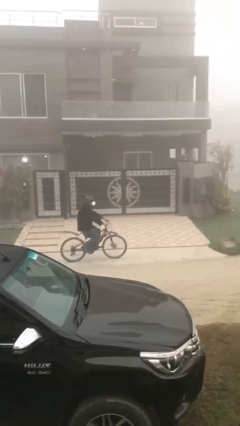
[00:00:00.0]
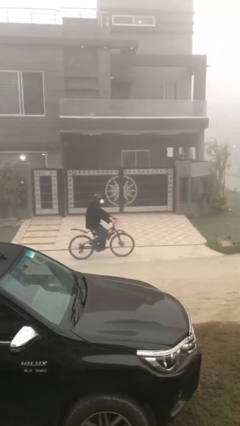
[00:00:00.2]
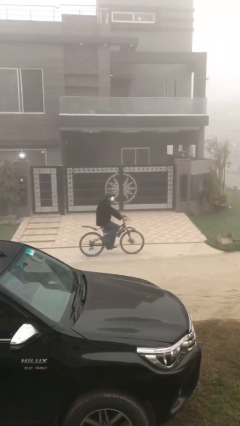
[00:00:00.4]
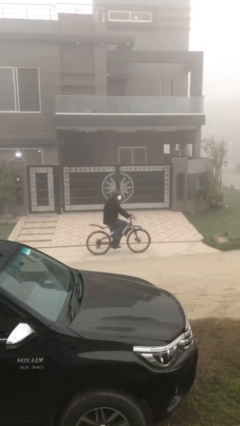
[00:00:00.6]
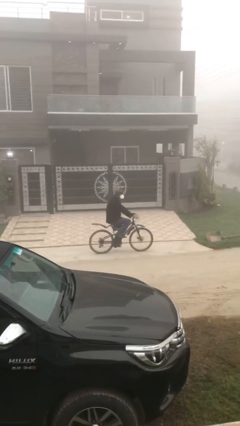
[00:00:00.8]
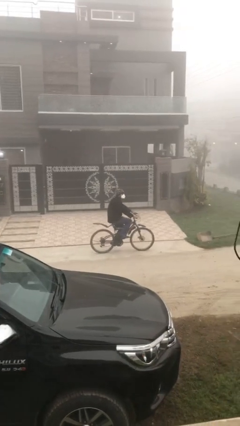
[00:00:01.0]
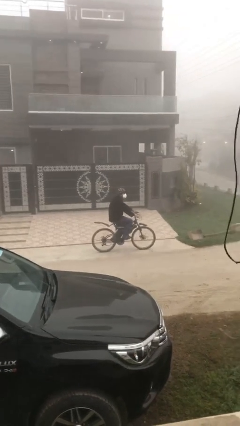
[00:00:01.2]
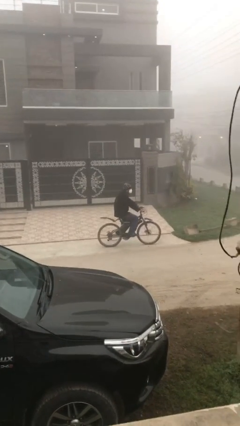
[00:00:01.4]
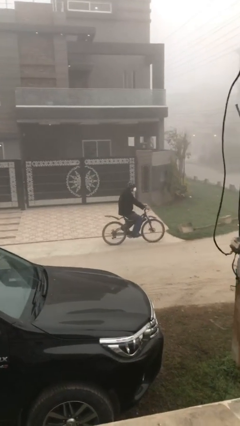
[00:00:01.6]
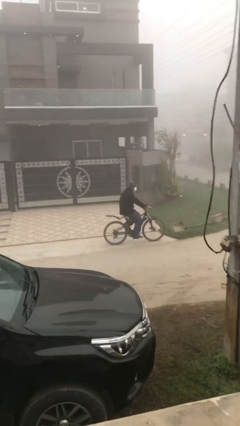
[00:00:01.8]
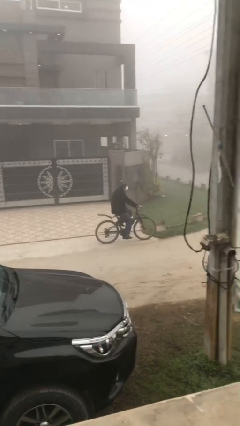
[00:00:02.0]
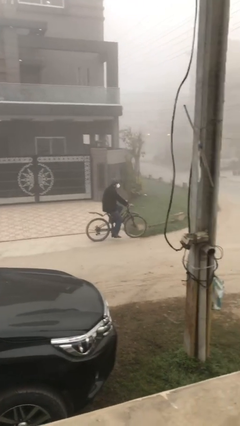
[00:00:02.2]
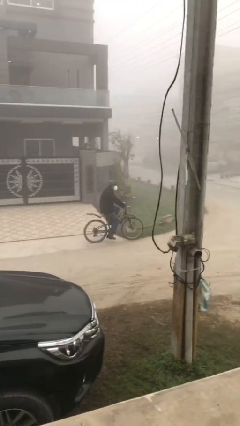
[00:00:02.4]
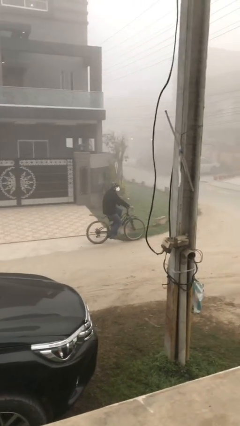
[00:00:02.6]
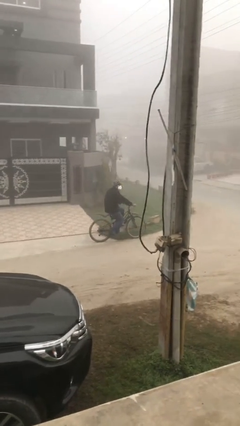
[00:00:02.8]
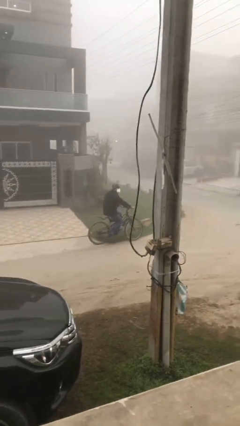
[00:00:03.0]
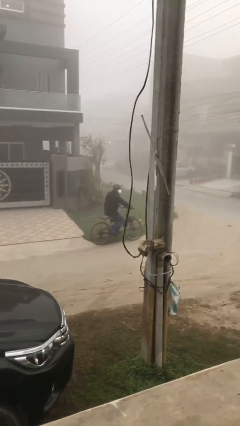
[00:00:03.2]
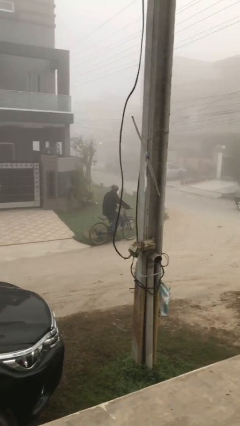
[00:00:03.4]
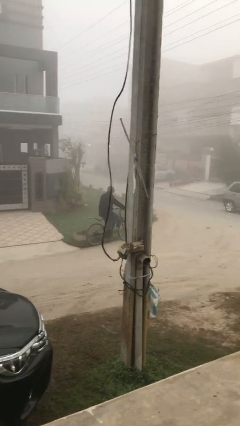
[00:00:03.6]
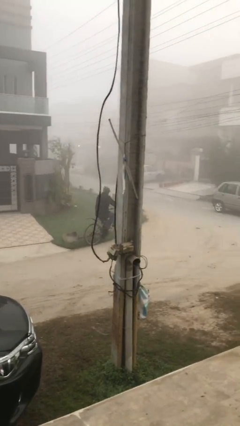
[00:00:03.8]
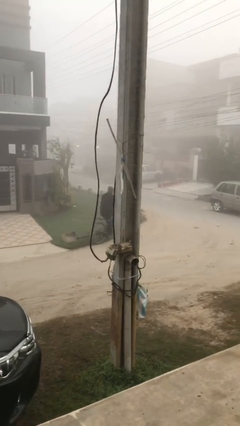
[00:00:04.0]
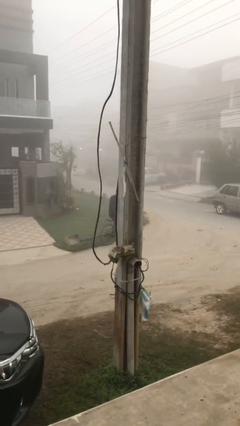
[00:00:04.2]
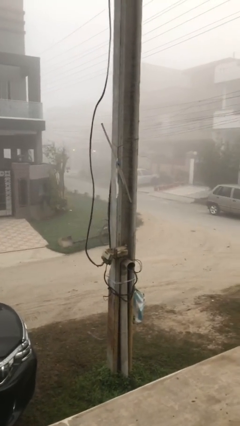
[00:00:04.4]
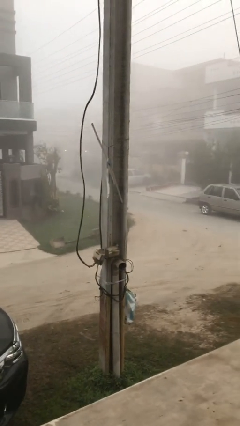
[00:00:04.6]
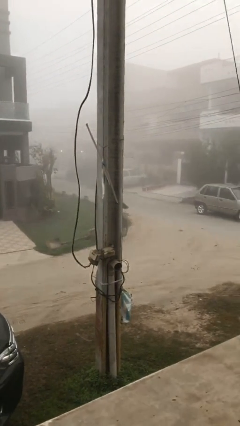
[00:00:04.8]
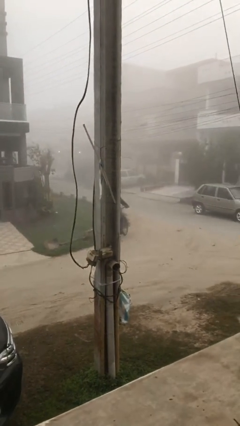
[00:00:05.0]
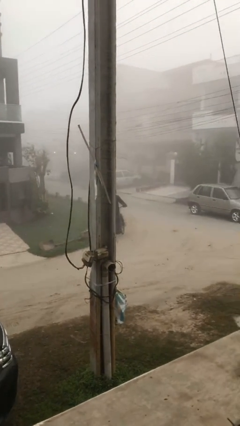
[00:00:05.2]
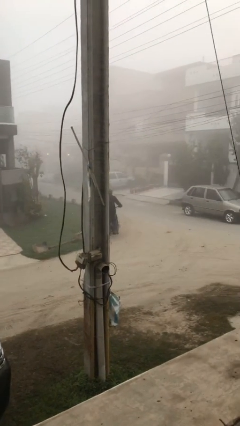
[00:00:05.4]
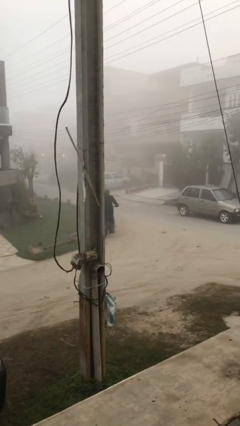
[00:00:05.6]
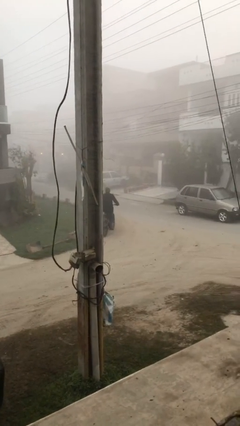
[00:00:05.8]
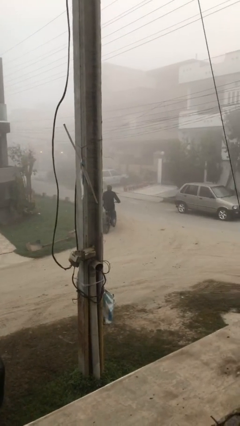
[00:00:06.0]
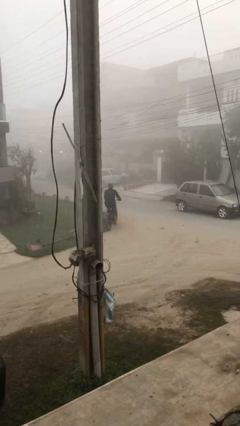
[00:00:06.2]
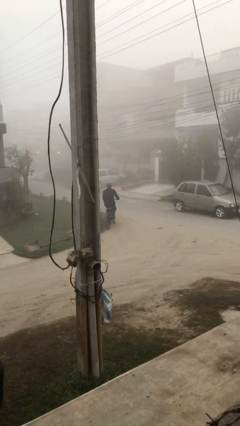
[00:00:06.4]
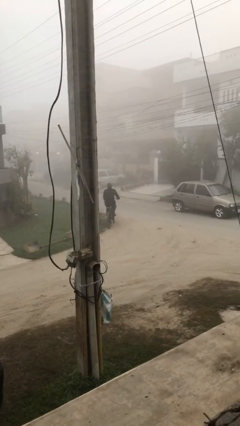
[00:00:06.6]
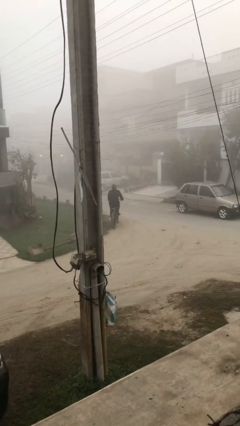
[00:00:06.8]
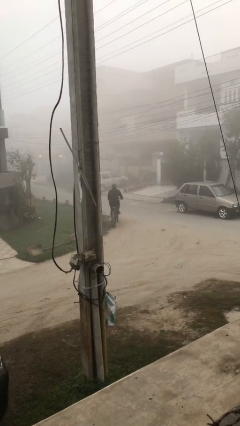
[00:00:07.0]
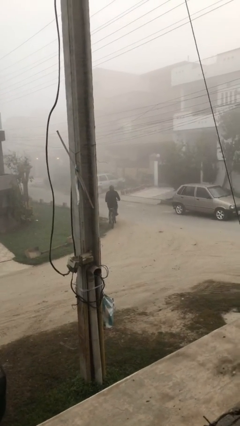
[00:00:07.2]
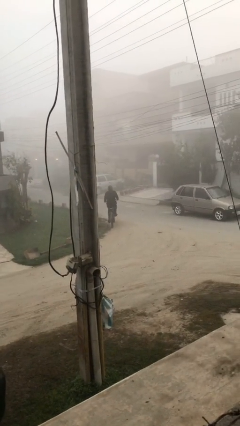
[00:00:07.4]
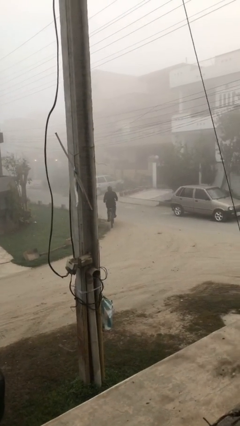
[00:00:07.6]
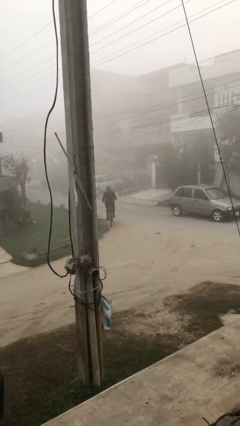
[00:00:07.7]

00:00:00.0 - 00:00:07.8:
person rides bicycle

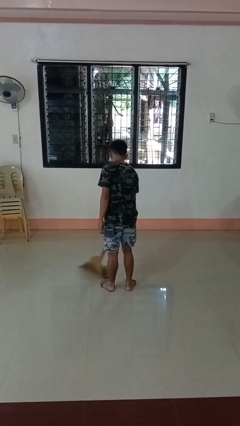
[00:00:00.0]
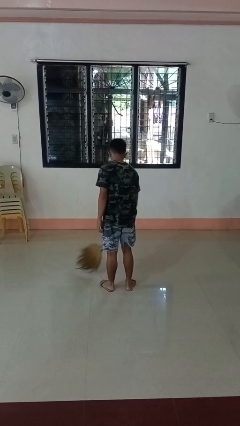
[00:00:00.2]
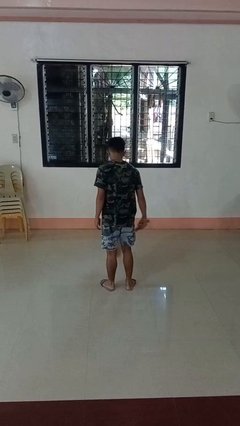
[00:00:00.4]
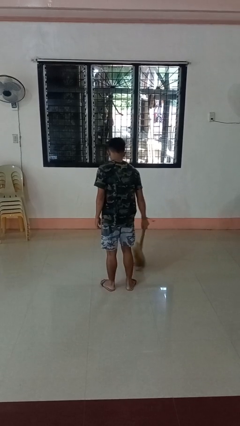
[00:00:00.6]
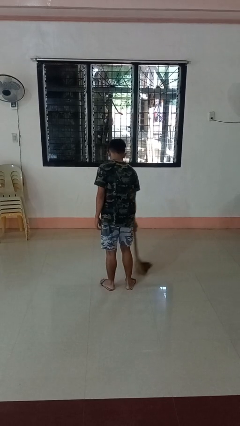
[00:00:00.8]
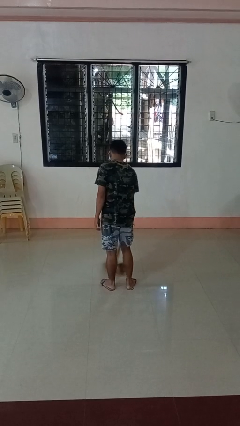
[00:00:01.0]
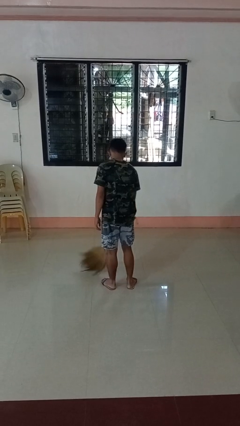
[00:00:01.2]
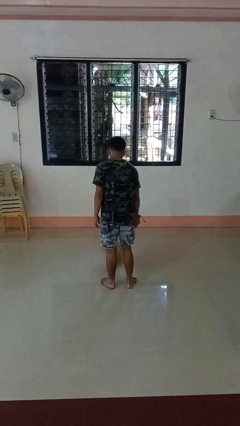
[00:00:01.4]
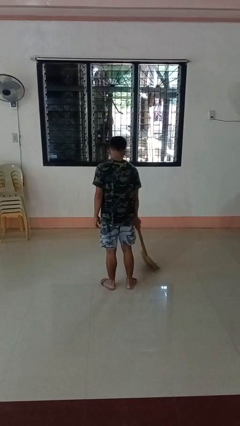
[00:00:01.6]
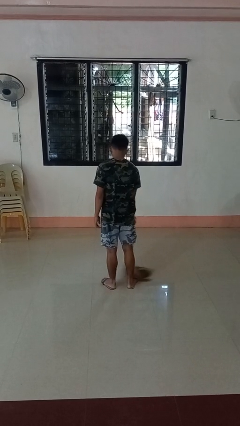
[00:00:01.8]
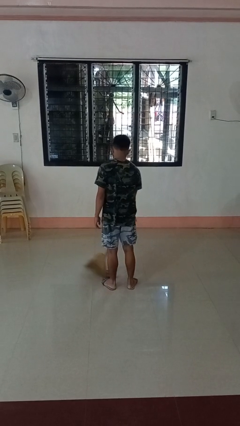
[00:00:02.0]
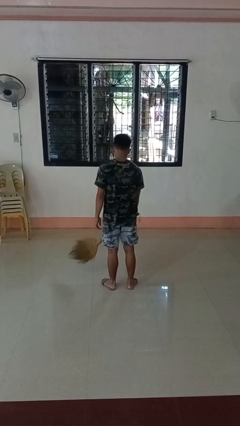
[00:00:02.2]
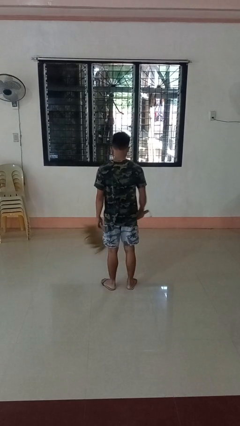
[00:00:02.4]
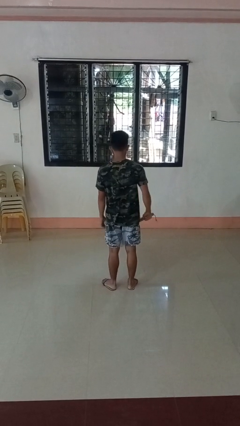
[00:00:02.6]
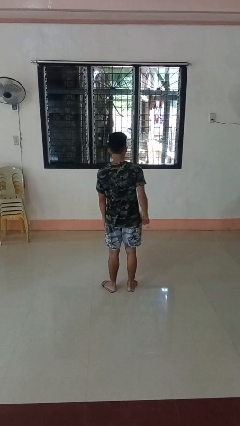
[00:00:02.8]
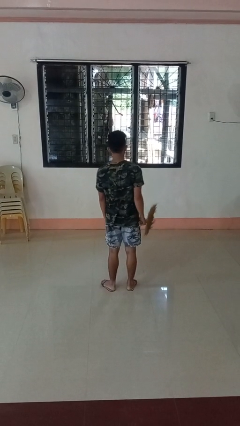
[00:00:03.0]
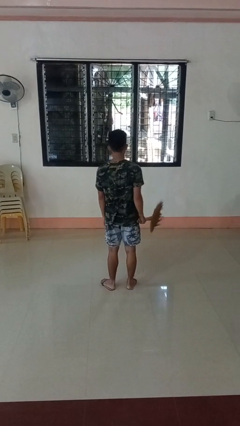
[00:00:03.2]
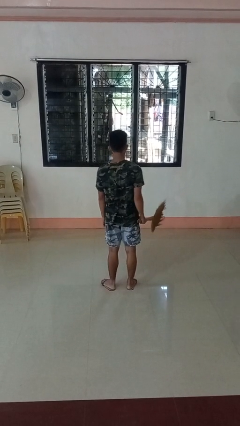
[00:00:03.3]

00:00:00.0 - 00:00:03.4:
person sweeps floor

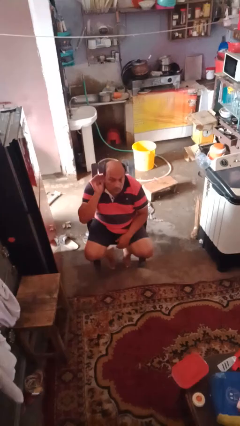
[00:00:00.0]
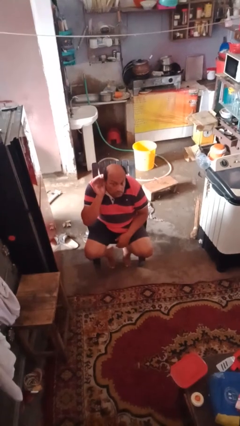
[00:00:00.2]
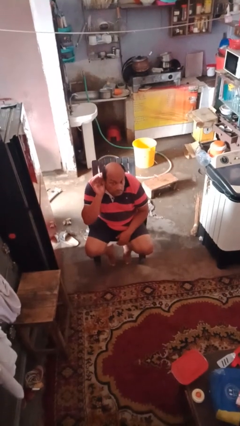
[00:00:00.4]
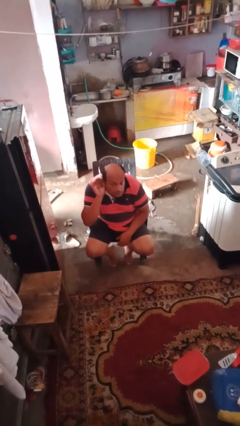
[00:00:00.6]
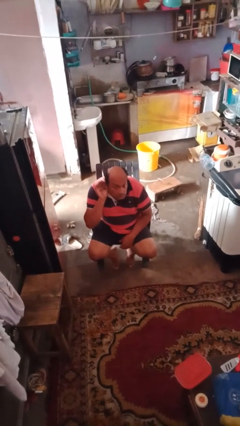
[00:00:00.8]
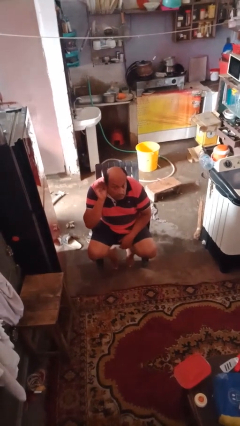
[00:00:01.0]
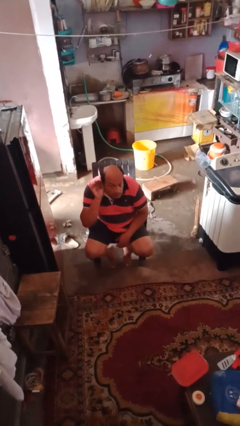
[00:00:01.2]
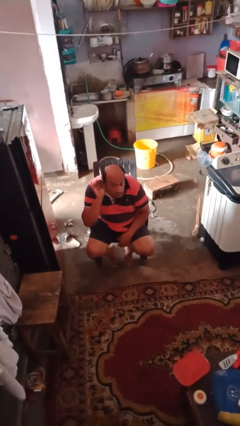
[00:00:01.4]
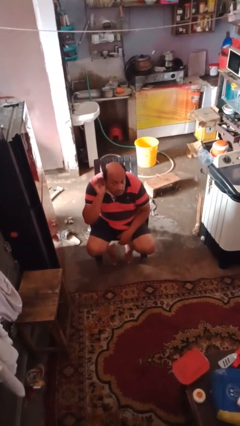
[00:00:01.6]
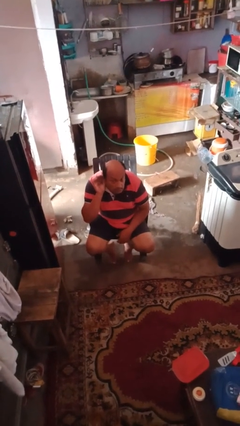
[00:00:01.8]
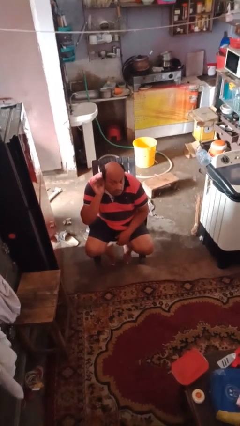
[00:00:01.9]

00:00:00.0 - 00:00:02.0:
person gestures listen closely

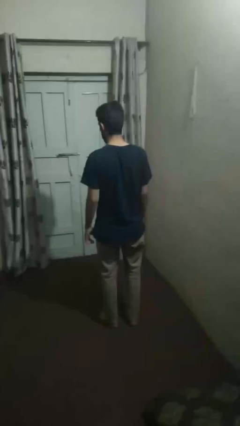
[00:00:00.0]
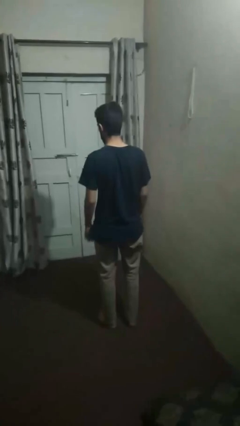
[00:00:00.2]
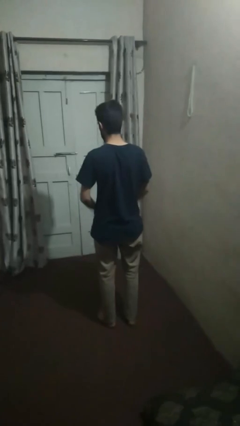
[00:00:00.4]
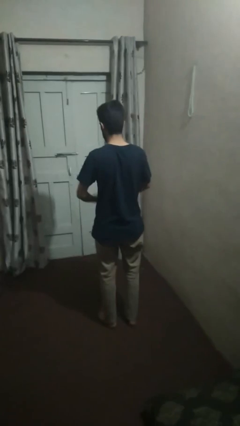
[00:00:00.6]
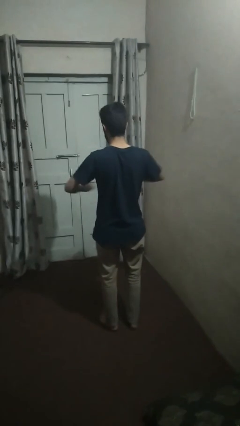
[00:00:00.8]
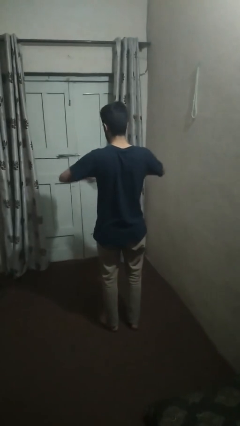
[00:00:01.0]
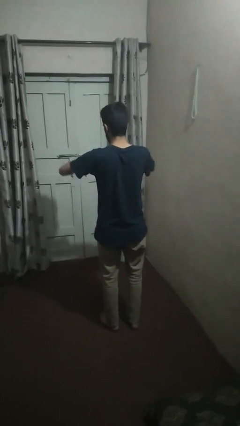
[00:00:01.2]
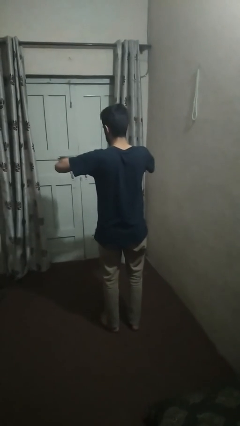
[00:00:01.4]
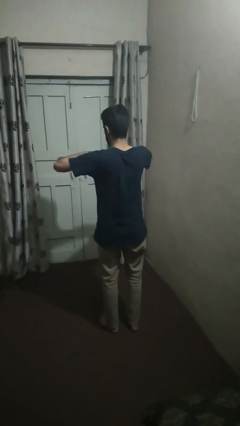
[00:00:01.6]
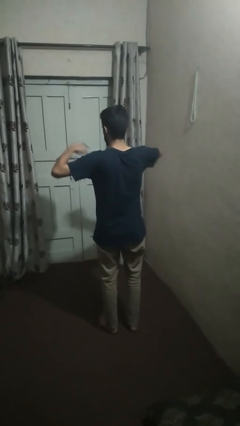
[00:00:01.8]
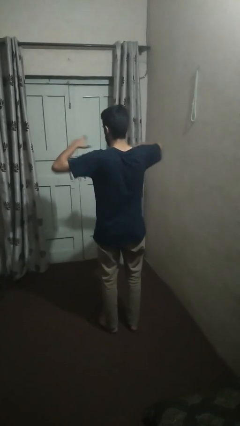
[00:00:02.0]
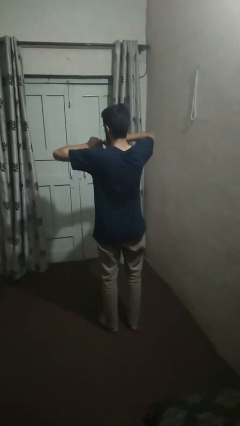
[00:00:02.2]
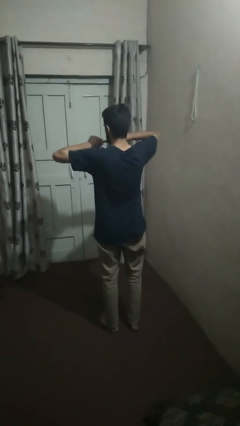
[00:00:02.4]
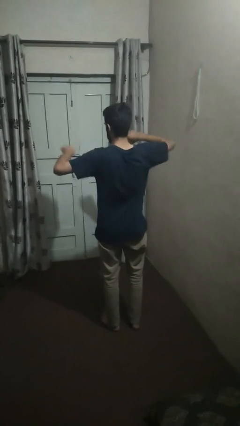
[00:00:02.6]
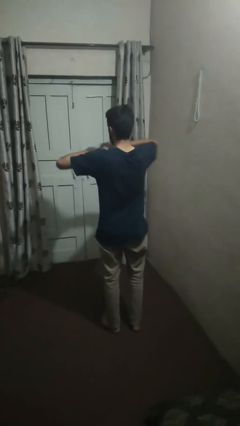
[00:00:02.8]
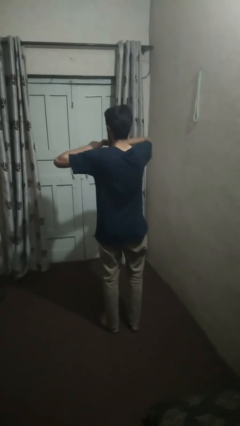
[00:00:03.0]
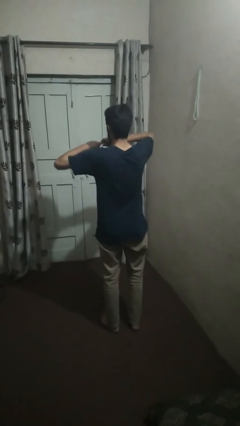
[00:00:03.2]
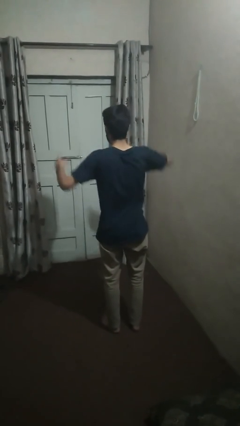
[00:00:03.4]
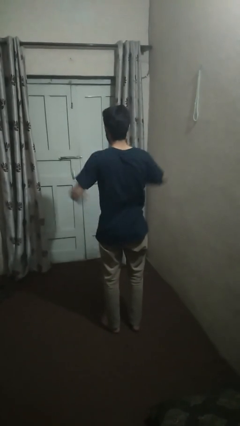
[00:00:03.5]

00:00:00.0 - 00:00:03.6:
person snaps fingers

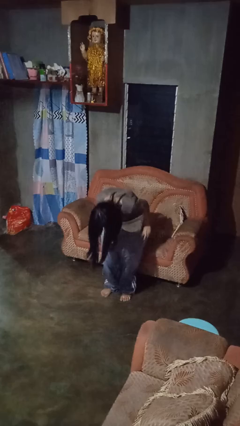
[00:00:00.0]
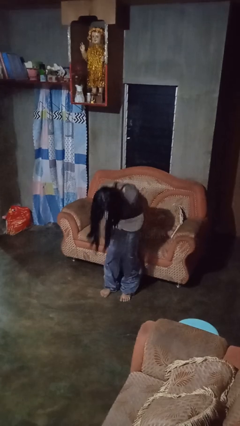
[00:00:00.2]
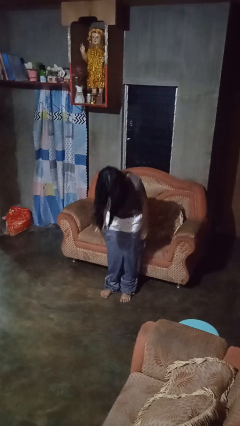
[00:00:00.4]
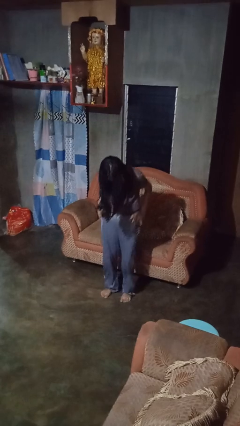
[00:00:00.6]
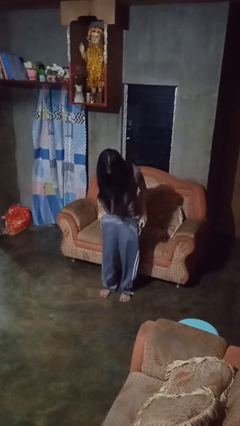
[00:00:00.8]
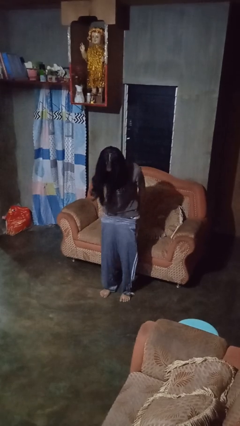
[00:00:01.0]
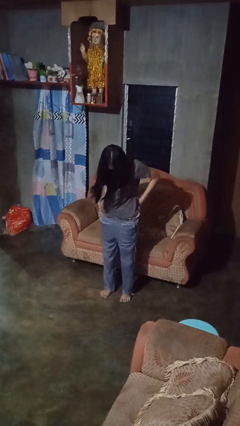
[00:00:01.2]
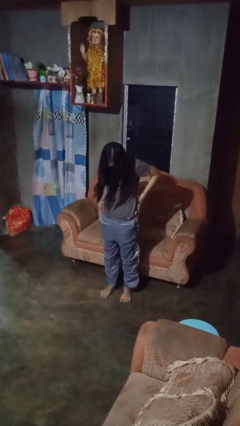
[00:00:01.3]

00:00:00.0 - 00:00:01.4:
person puts on pants
